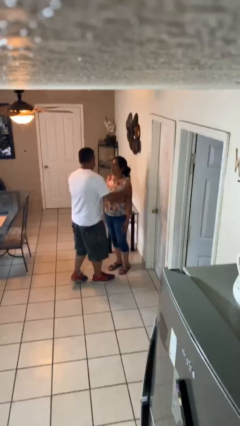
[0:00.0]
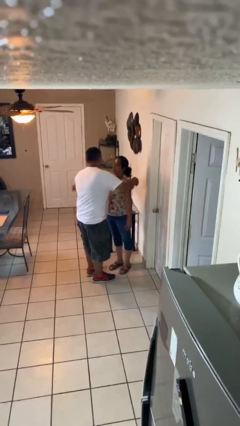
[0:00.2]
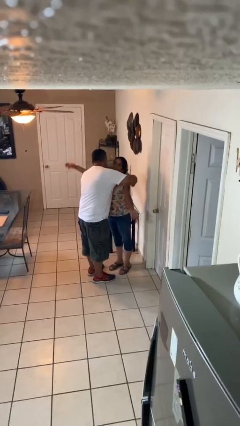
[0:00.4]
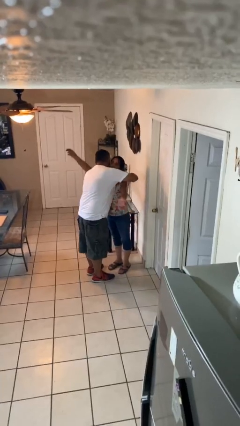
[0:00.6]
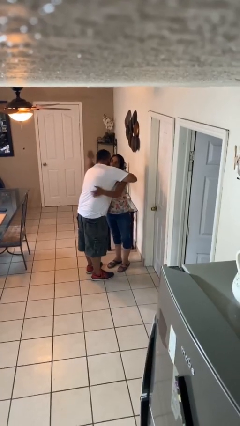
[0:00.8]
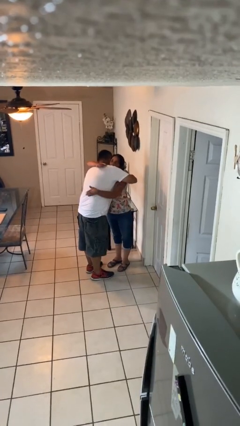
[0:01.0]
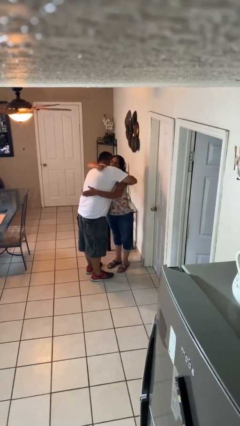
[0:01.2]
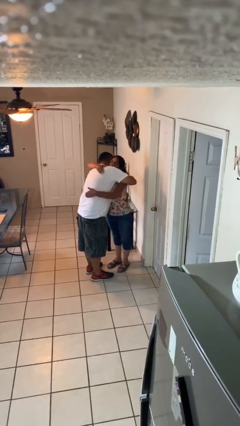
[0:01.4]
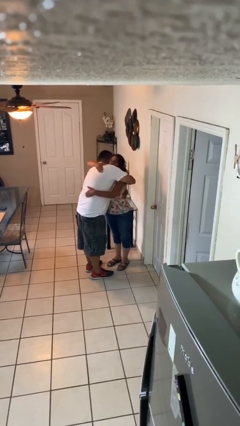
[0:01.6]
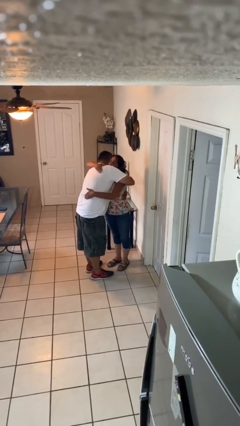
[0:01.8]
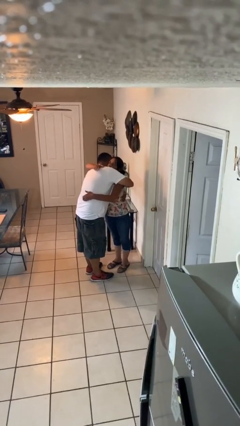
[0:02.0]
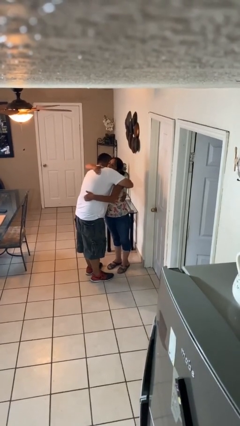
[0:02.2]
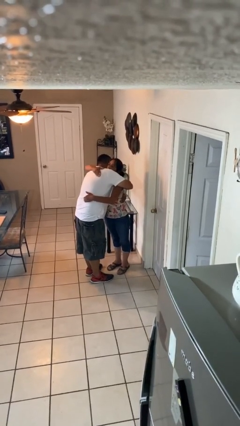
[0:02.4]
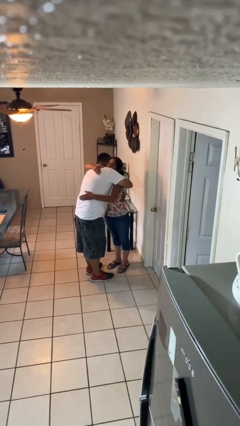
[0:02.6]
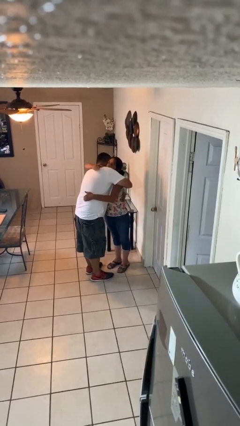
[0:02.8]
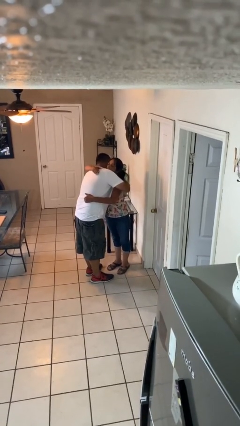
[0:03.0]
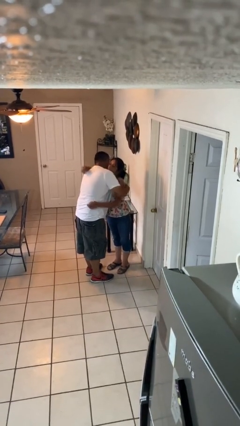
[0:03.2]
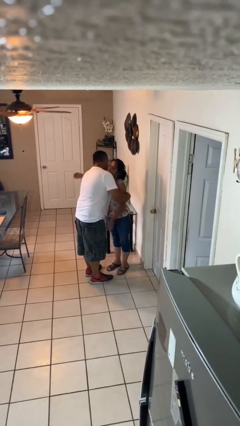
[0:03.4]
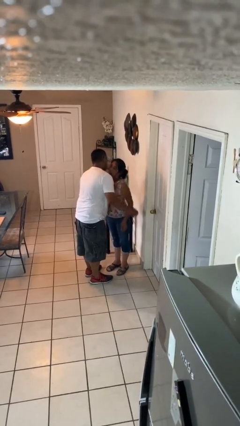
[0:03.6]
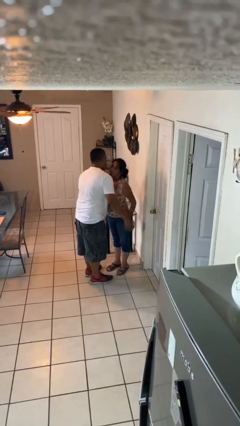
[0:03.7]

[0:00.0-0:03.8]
person embraces person

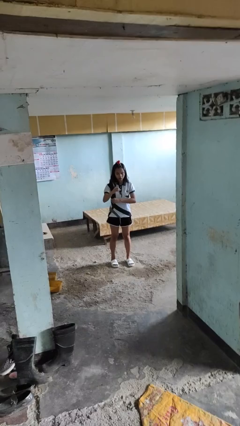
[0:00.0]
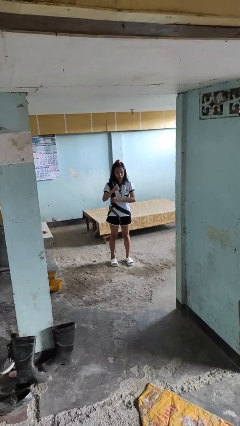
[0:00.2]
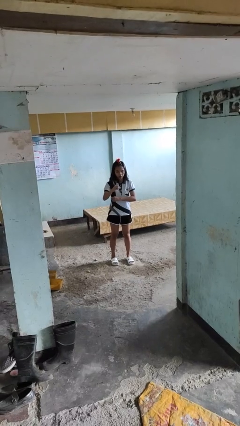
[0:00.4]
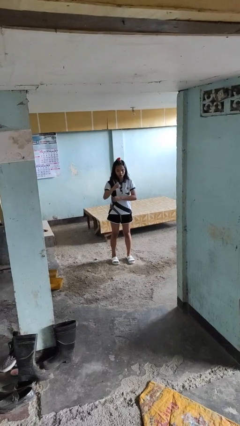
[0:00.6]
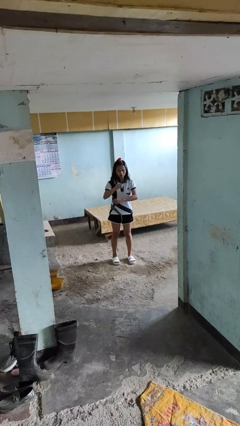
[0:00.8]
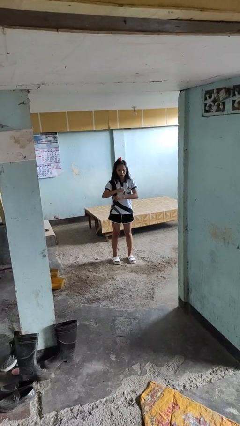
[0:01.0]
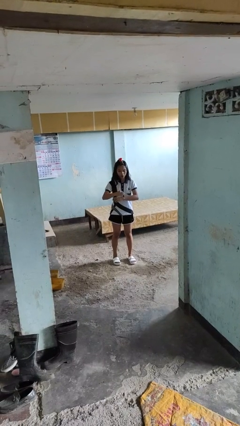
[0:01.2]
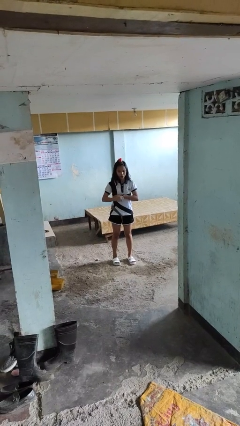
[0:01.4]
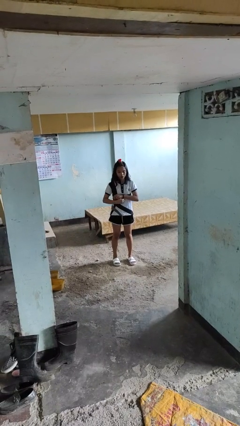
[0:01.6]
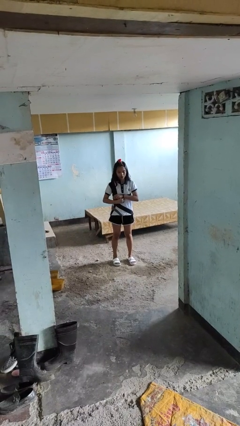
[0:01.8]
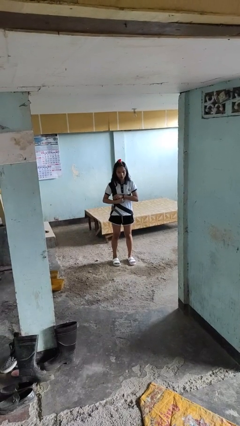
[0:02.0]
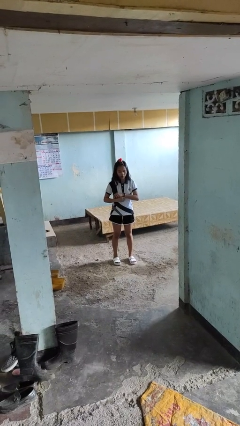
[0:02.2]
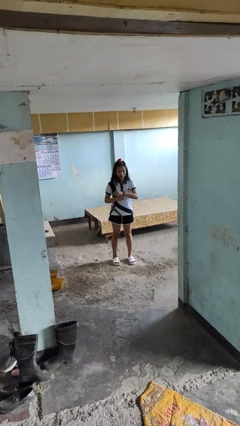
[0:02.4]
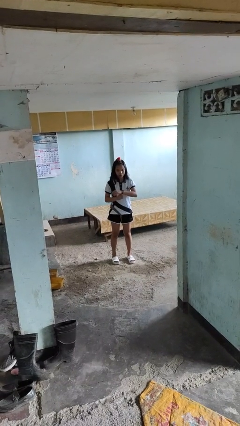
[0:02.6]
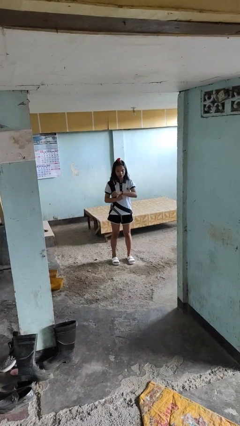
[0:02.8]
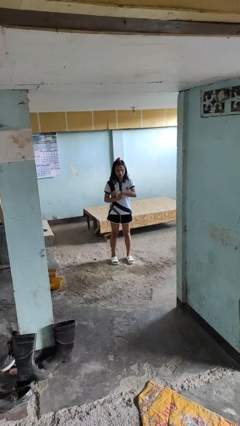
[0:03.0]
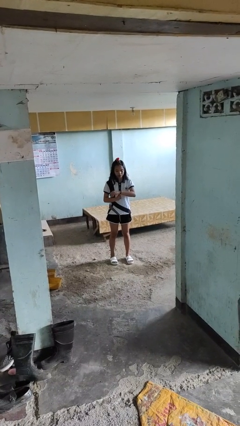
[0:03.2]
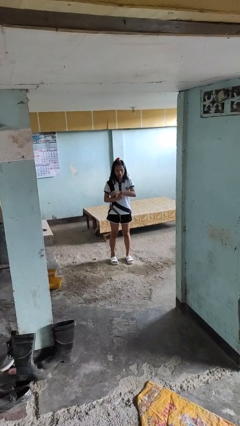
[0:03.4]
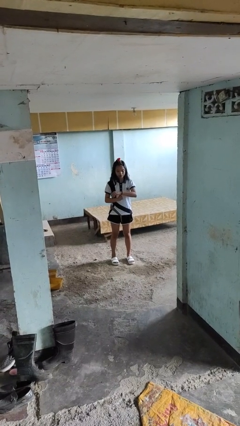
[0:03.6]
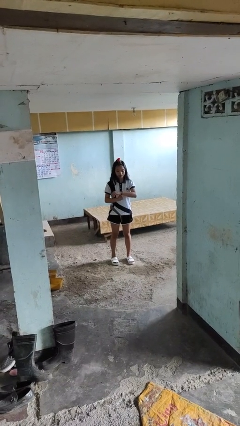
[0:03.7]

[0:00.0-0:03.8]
person puts on wristwatch

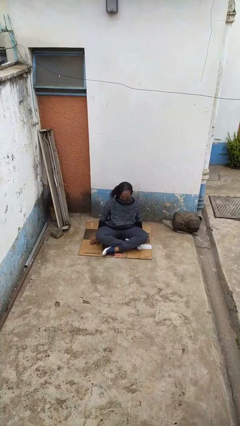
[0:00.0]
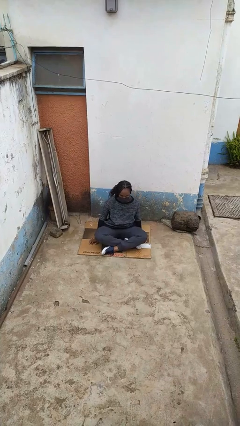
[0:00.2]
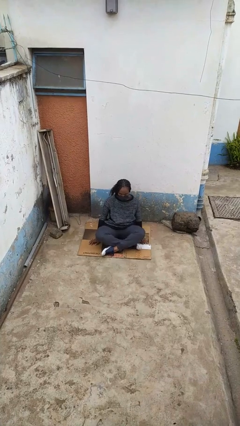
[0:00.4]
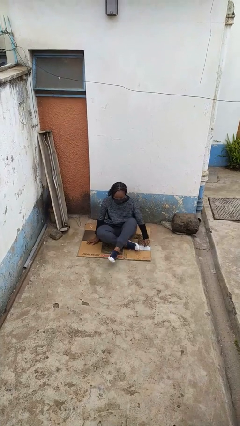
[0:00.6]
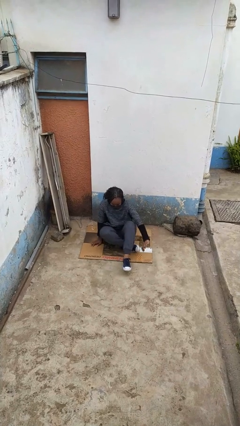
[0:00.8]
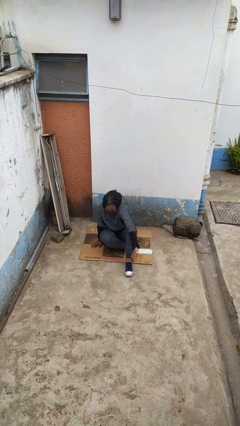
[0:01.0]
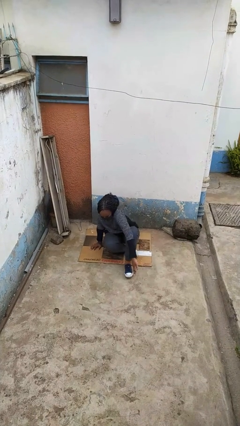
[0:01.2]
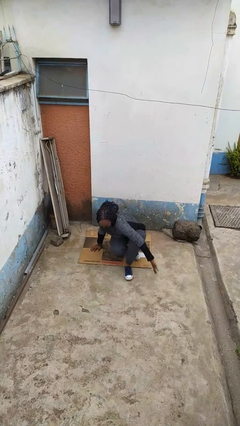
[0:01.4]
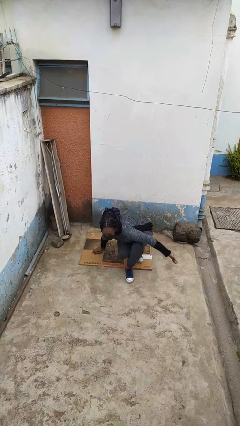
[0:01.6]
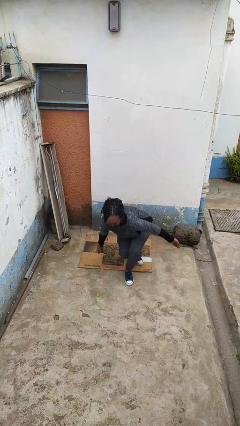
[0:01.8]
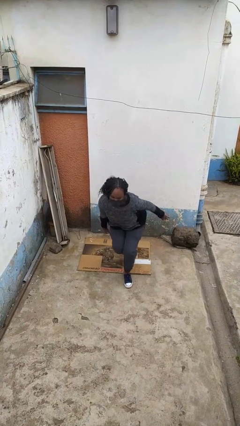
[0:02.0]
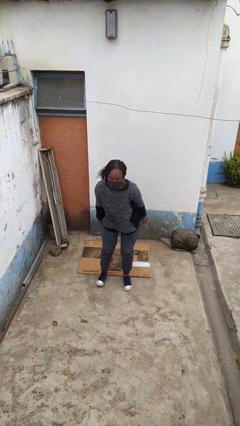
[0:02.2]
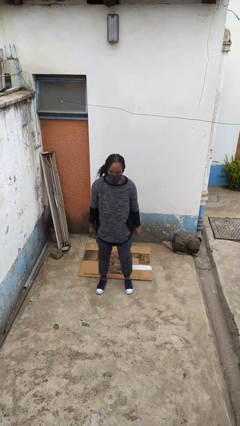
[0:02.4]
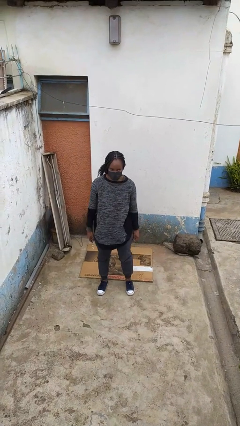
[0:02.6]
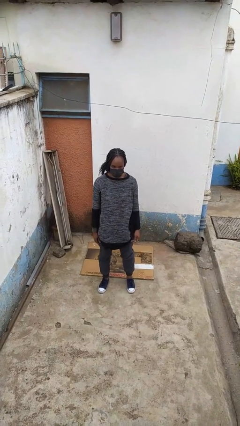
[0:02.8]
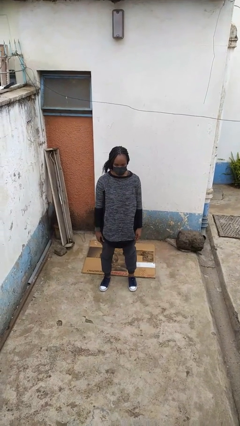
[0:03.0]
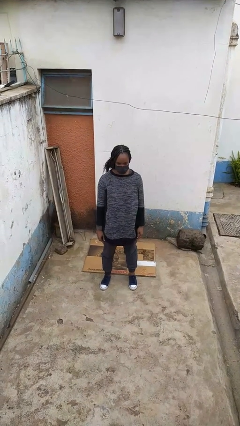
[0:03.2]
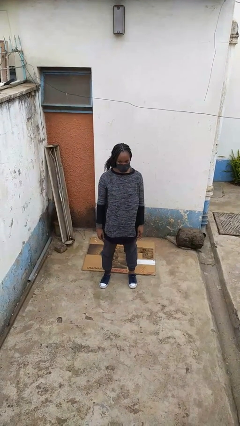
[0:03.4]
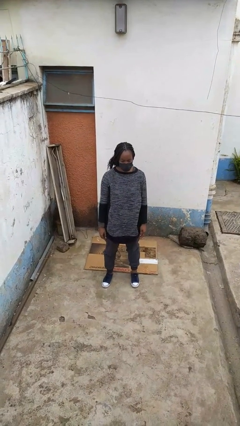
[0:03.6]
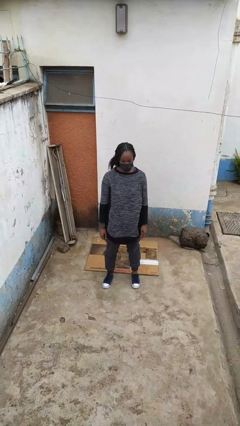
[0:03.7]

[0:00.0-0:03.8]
person stands up from floor

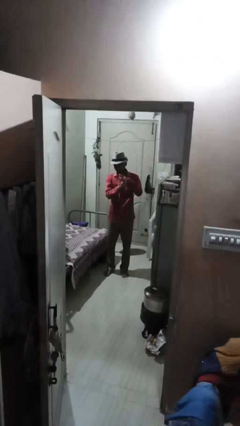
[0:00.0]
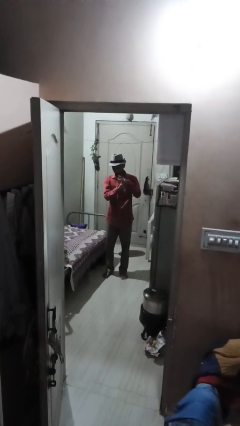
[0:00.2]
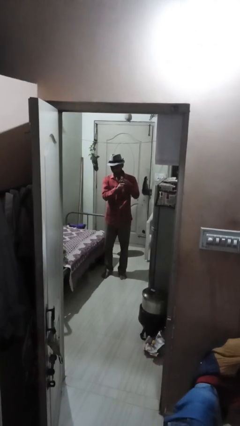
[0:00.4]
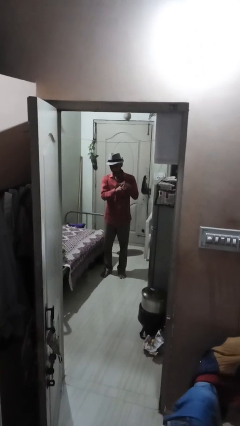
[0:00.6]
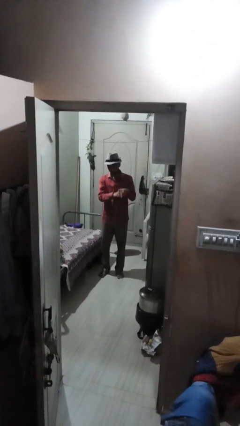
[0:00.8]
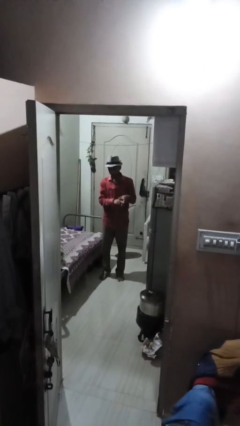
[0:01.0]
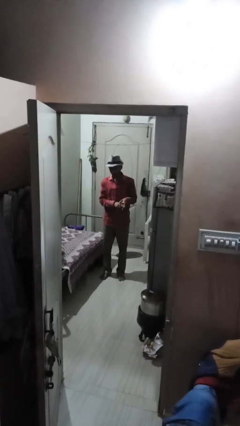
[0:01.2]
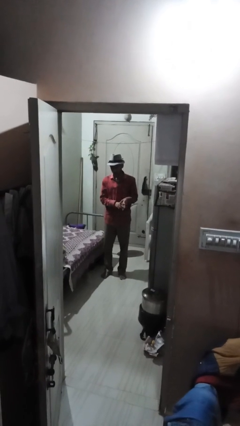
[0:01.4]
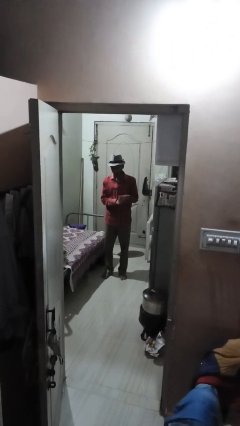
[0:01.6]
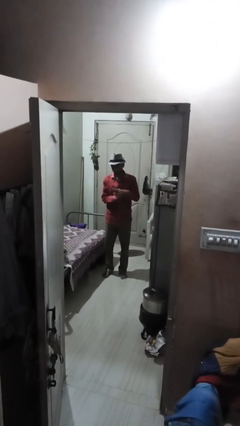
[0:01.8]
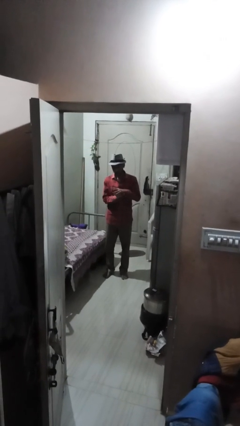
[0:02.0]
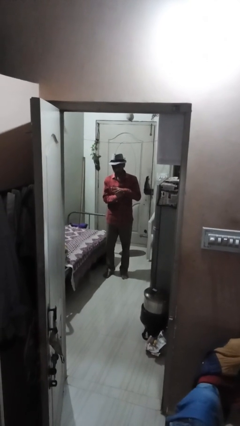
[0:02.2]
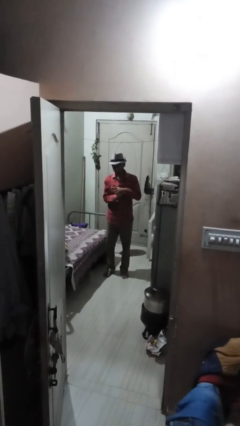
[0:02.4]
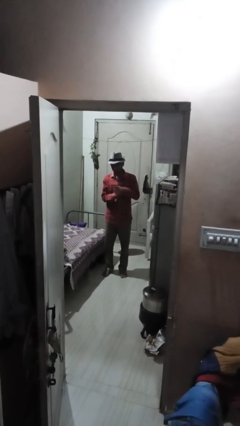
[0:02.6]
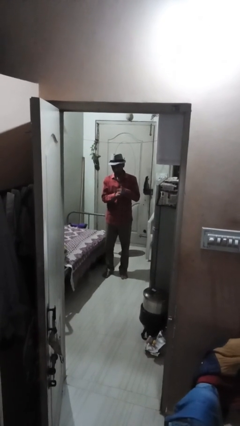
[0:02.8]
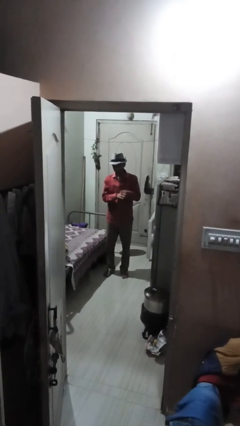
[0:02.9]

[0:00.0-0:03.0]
person cracks knuckles

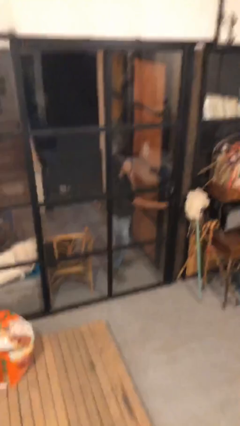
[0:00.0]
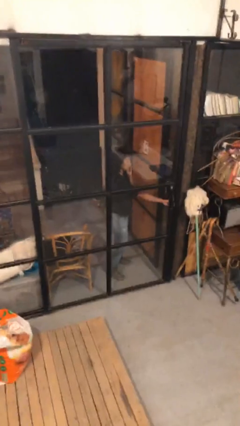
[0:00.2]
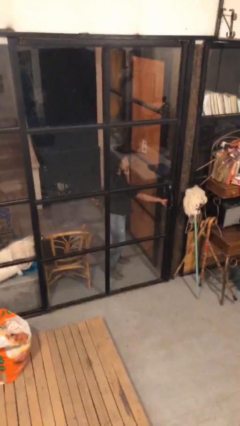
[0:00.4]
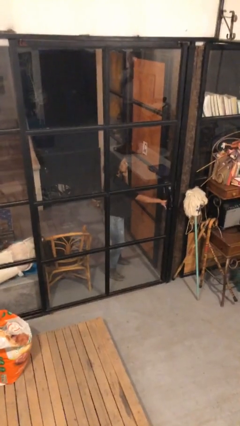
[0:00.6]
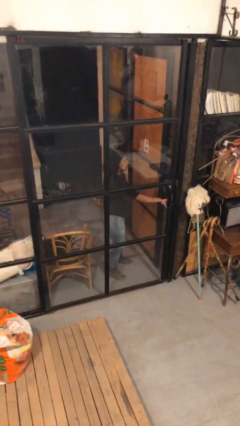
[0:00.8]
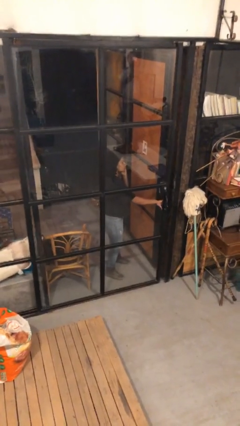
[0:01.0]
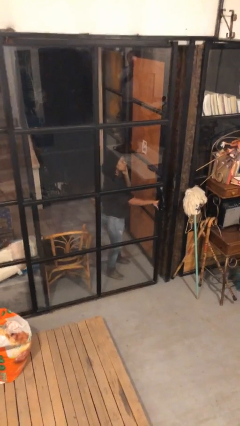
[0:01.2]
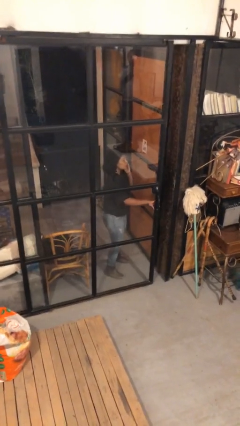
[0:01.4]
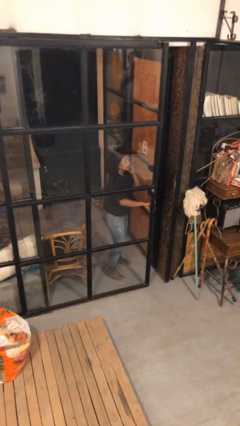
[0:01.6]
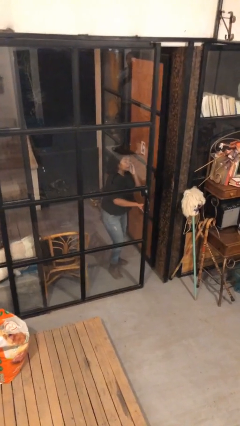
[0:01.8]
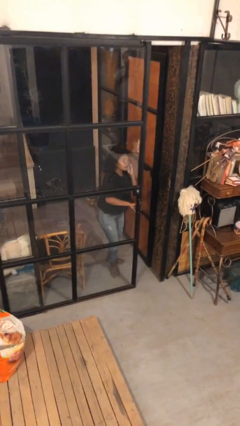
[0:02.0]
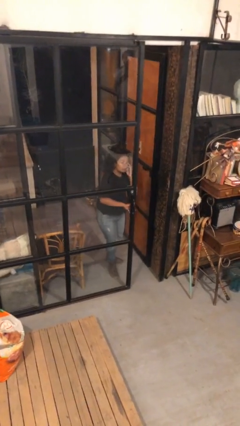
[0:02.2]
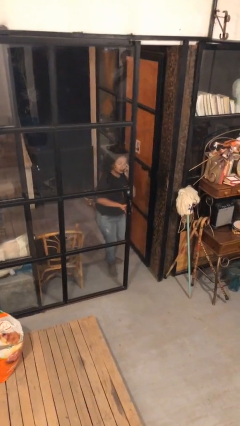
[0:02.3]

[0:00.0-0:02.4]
person opens facility door

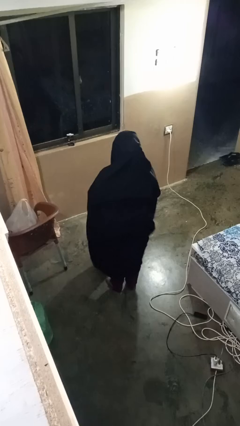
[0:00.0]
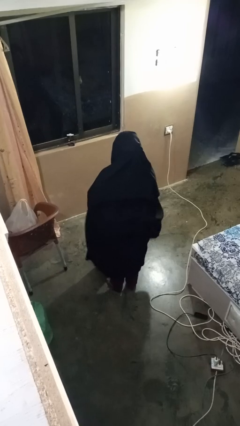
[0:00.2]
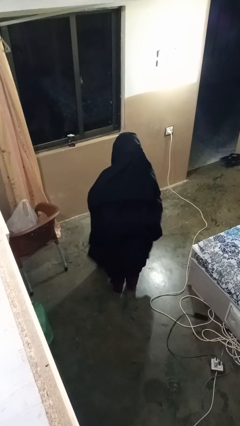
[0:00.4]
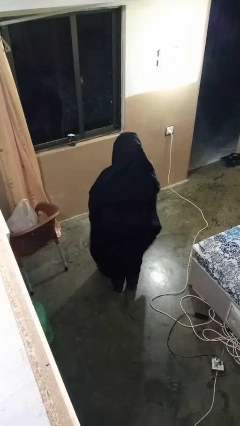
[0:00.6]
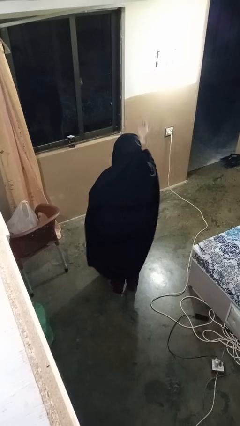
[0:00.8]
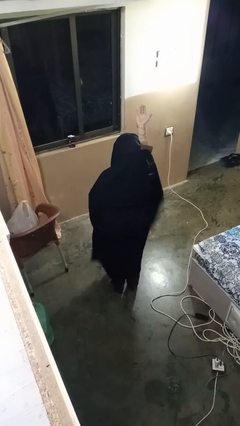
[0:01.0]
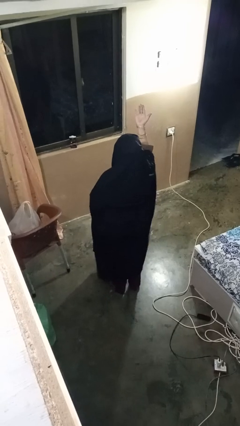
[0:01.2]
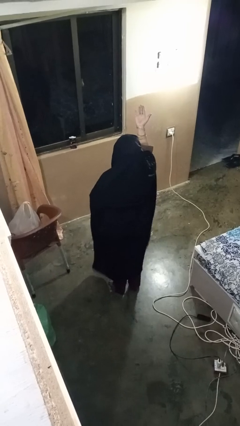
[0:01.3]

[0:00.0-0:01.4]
person gestures swipe up
